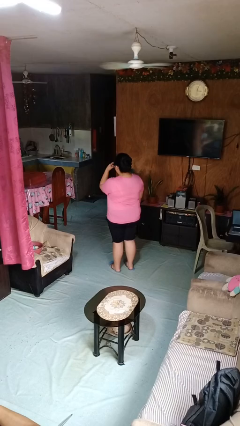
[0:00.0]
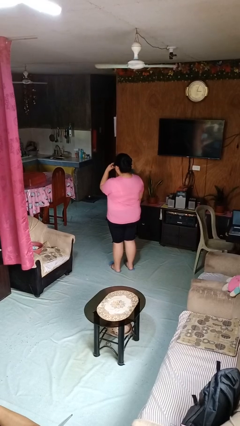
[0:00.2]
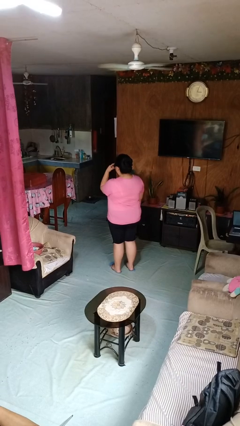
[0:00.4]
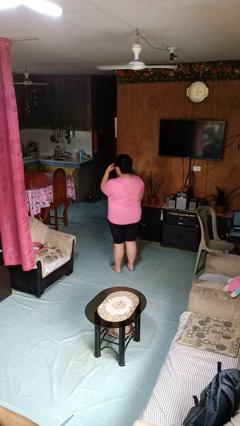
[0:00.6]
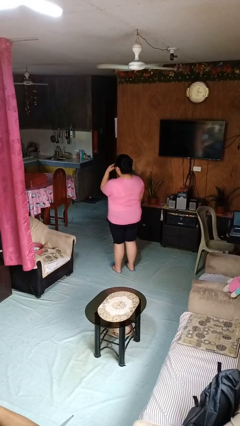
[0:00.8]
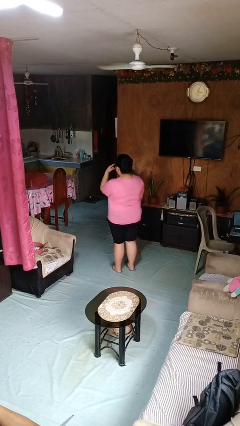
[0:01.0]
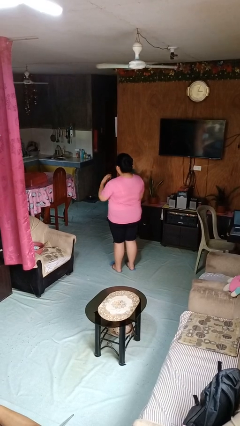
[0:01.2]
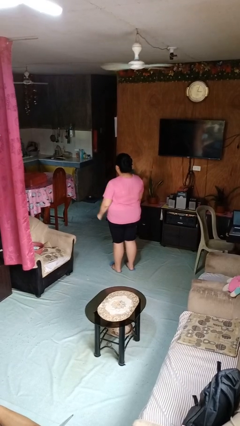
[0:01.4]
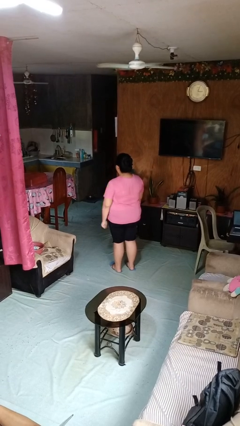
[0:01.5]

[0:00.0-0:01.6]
person gestures watch closely

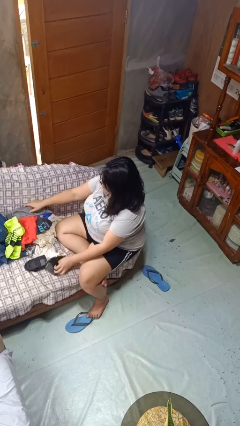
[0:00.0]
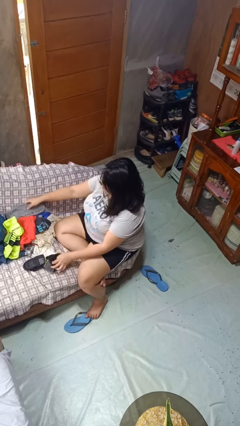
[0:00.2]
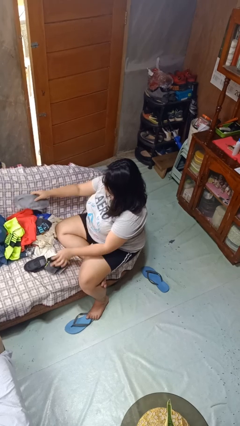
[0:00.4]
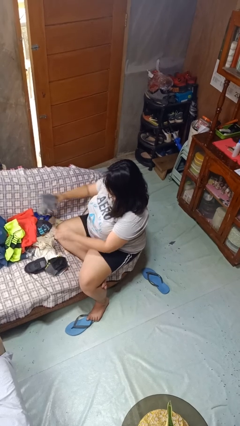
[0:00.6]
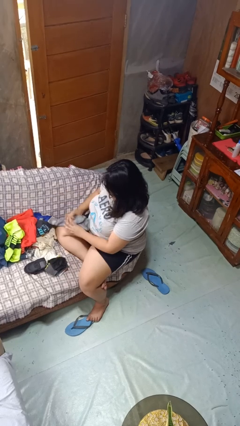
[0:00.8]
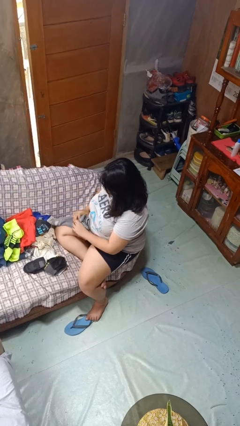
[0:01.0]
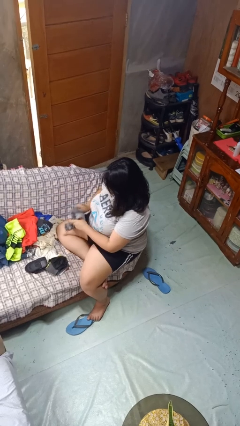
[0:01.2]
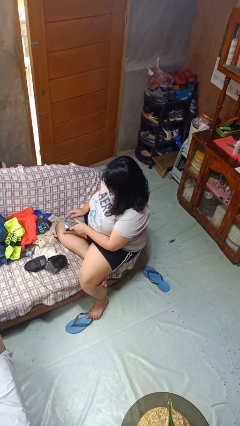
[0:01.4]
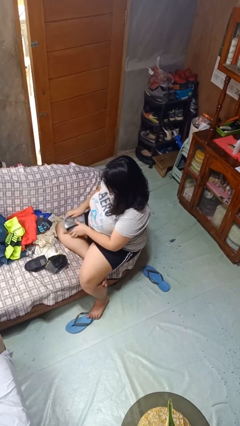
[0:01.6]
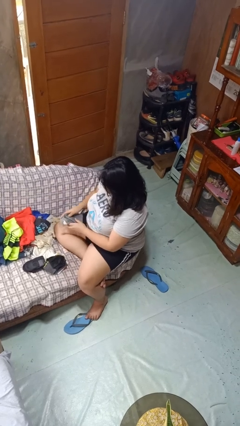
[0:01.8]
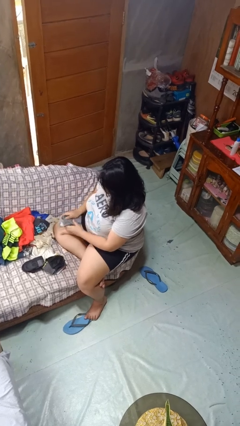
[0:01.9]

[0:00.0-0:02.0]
person folds socks

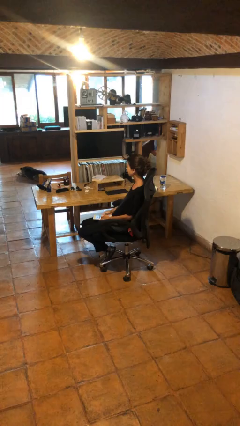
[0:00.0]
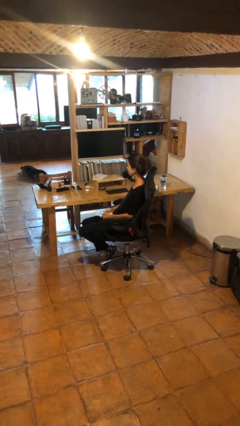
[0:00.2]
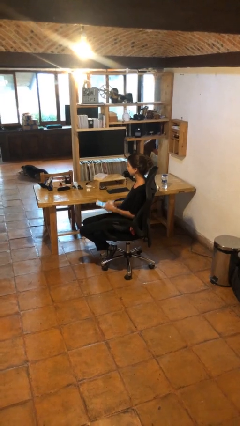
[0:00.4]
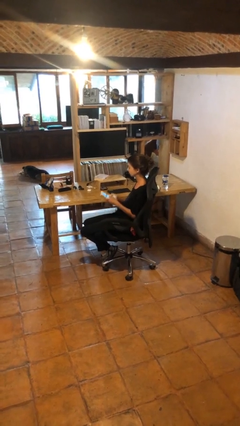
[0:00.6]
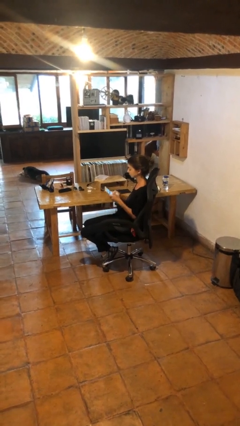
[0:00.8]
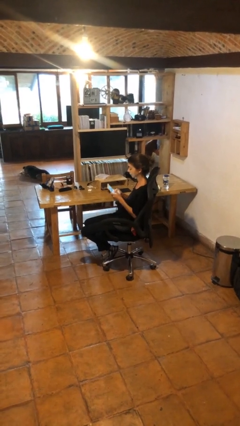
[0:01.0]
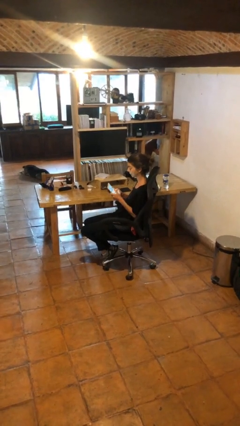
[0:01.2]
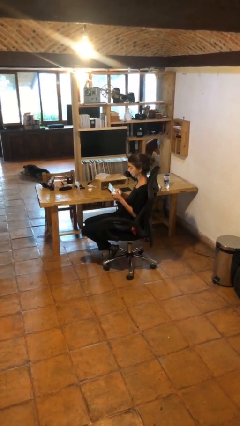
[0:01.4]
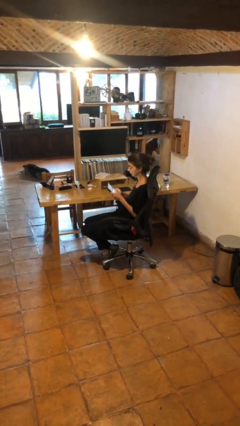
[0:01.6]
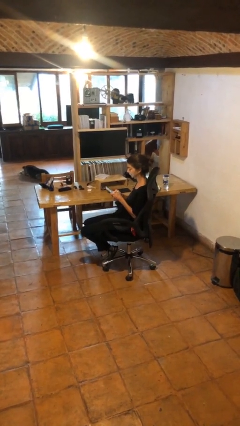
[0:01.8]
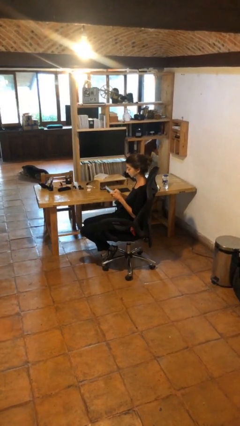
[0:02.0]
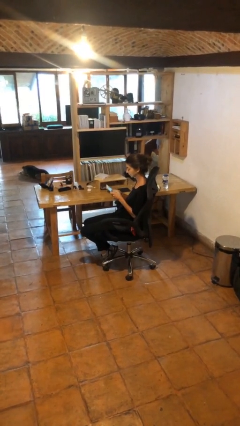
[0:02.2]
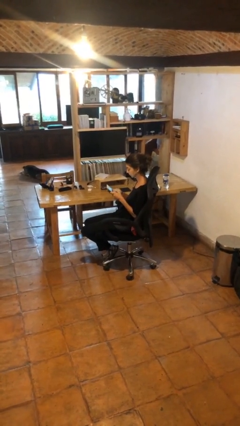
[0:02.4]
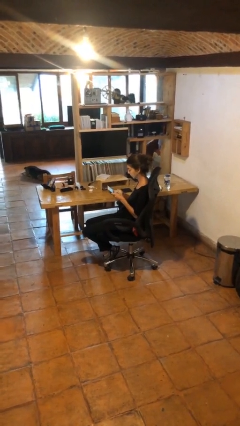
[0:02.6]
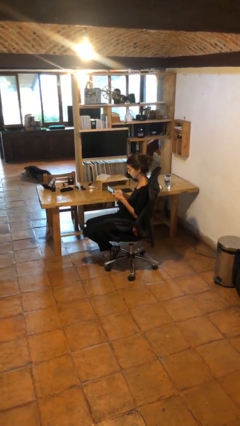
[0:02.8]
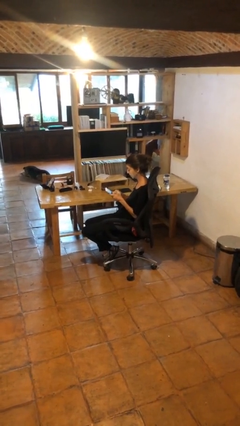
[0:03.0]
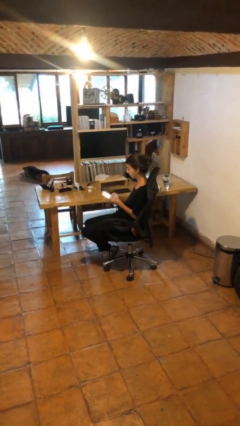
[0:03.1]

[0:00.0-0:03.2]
person interacts with tablet

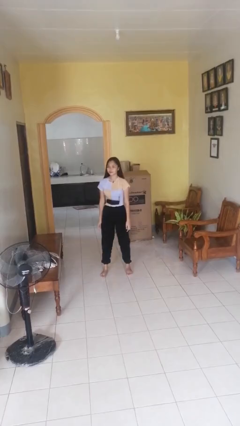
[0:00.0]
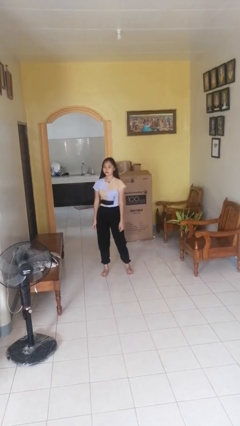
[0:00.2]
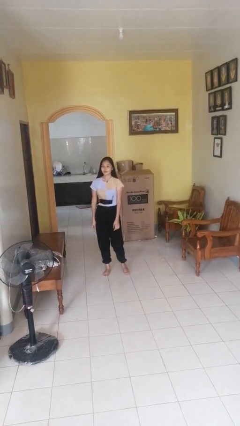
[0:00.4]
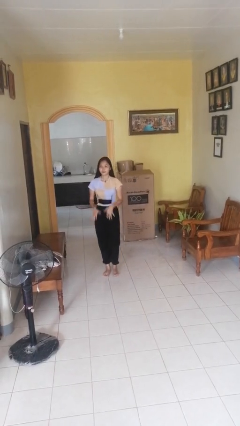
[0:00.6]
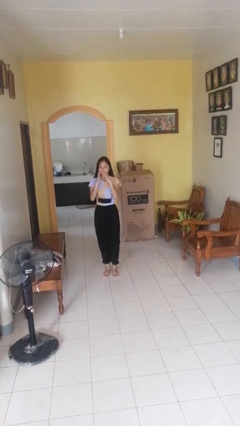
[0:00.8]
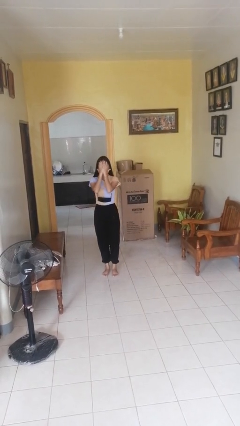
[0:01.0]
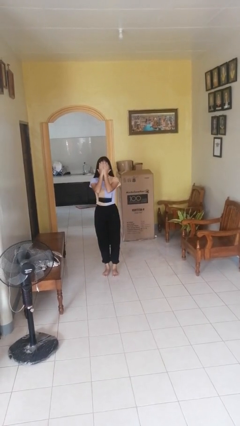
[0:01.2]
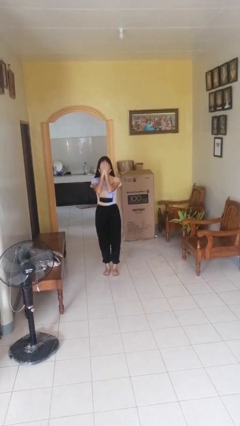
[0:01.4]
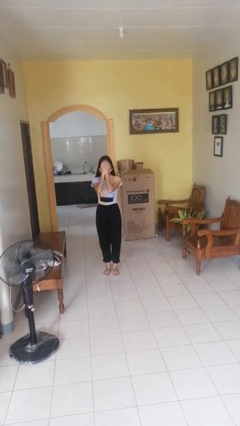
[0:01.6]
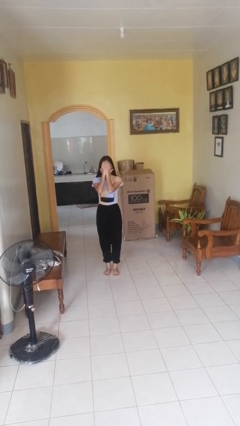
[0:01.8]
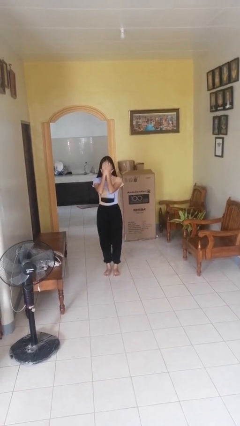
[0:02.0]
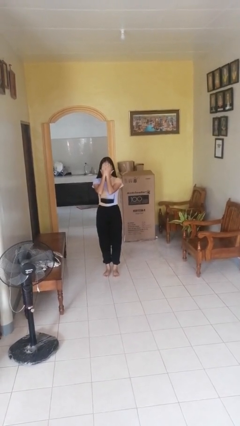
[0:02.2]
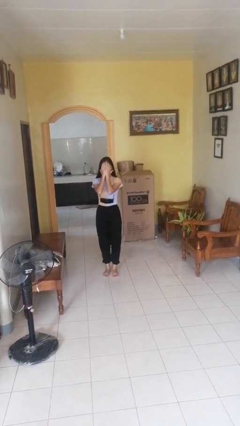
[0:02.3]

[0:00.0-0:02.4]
person covers face with hands

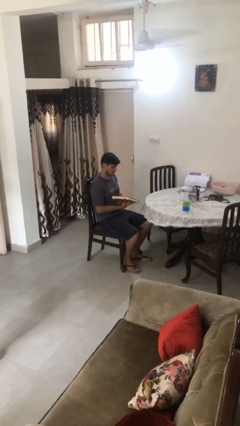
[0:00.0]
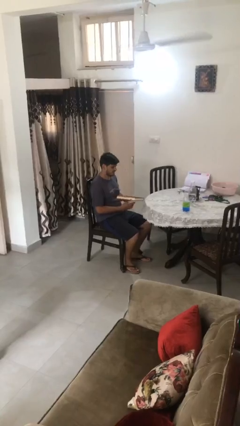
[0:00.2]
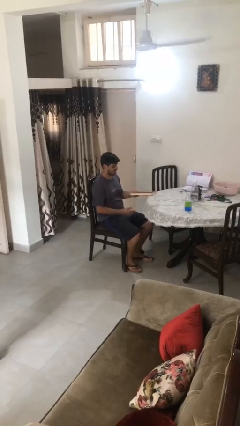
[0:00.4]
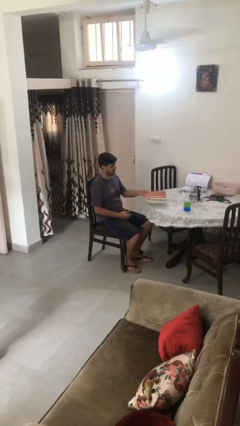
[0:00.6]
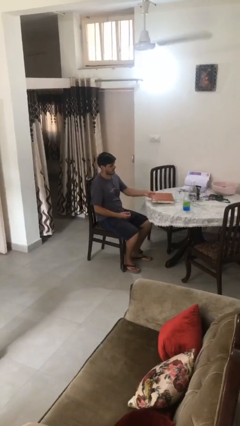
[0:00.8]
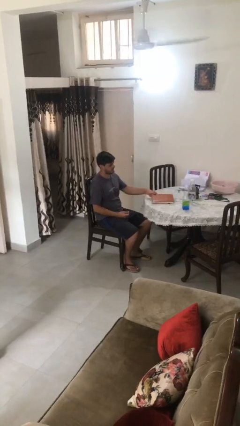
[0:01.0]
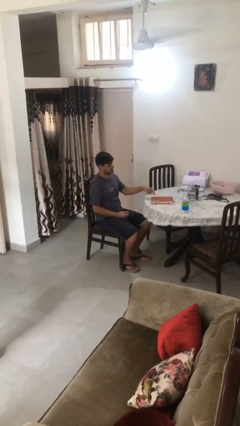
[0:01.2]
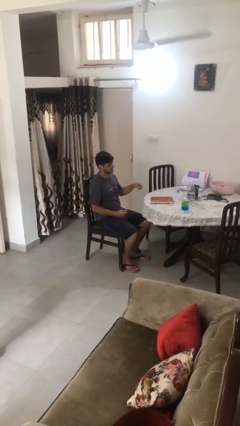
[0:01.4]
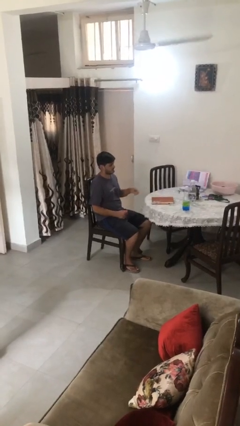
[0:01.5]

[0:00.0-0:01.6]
person puts down object on table

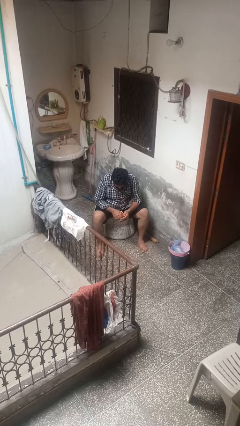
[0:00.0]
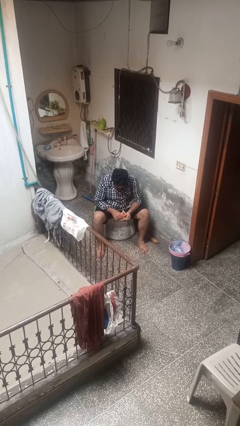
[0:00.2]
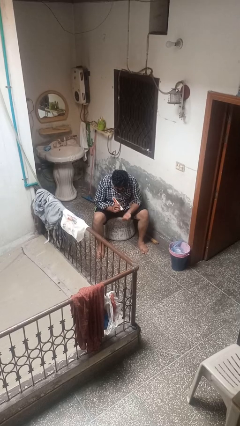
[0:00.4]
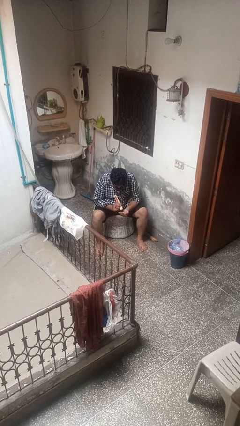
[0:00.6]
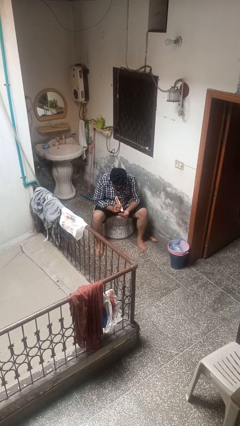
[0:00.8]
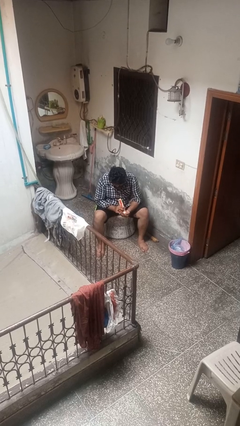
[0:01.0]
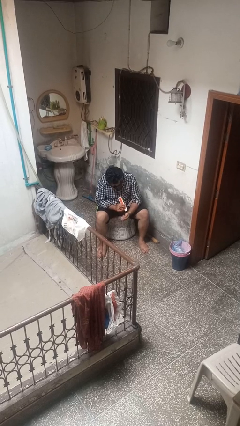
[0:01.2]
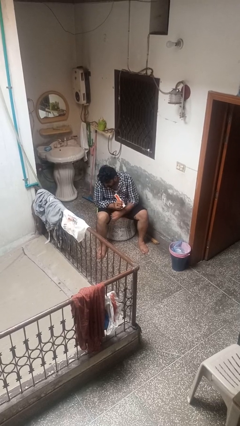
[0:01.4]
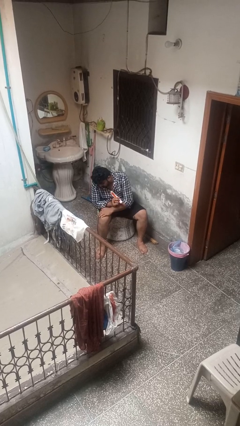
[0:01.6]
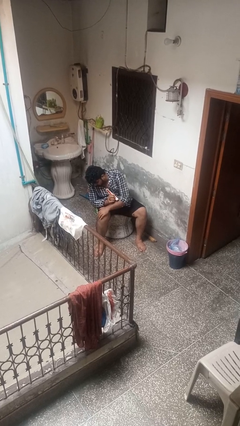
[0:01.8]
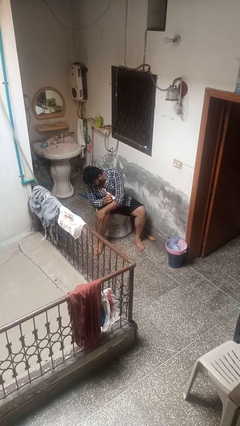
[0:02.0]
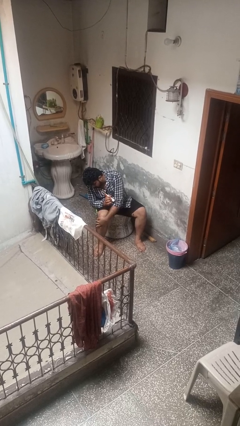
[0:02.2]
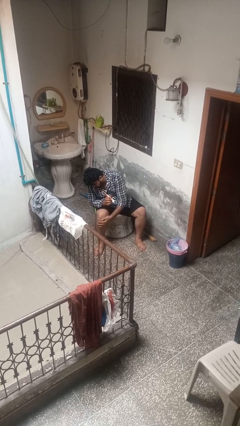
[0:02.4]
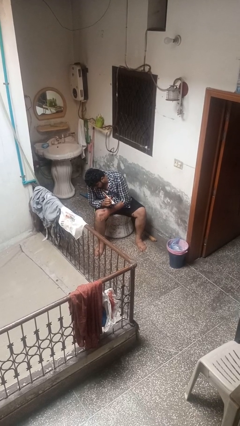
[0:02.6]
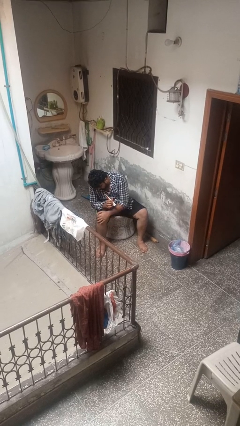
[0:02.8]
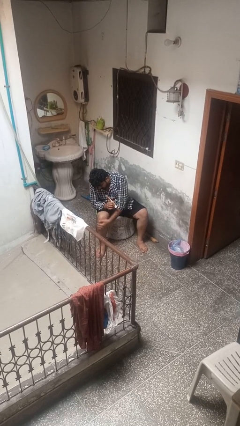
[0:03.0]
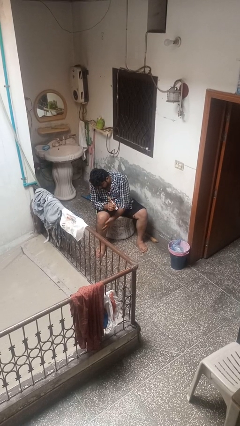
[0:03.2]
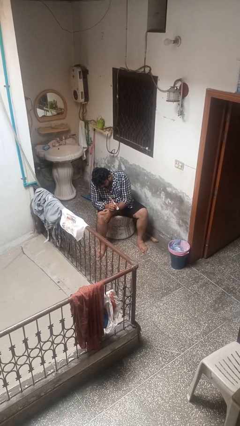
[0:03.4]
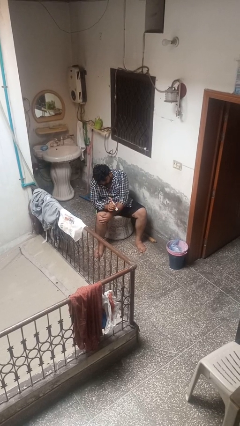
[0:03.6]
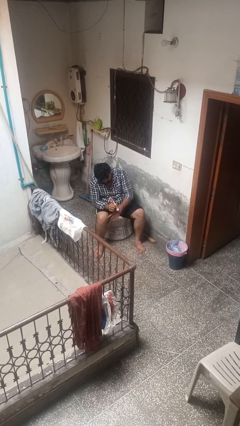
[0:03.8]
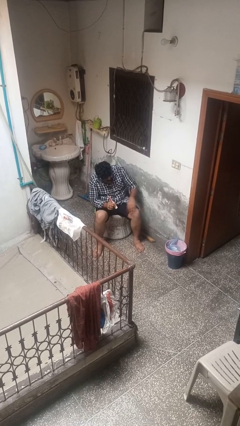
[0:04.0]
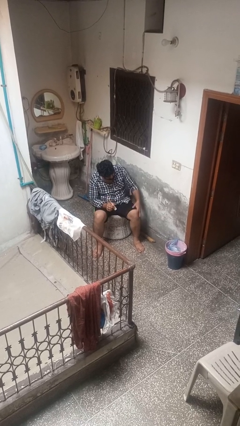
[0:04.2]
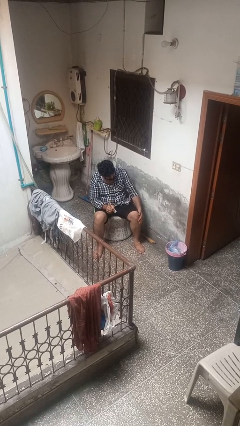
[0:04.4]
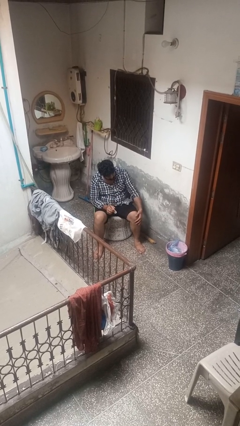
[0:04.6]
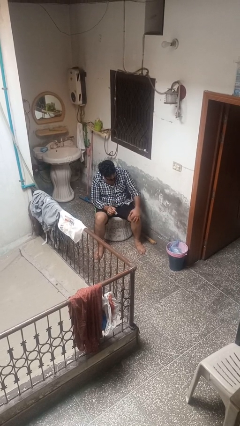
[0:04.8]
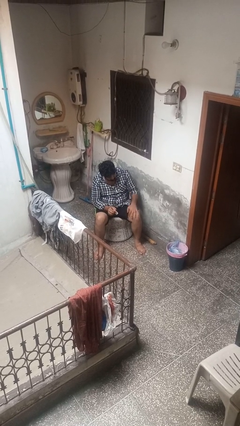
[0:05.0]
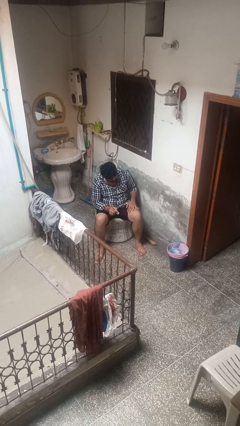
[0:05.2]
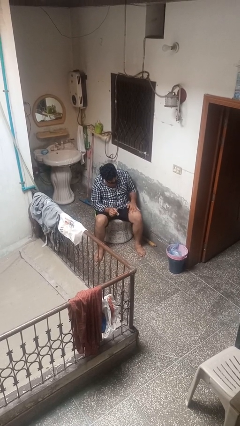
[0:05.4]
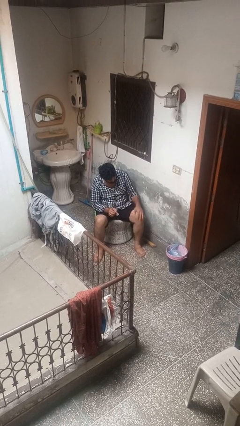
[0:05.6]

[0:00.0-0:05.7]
person applies sunscreen

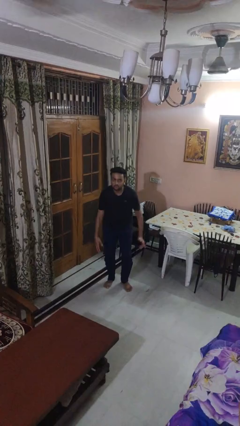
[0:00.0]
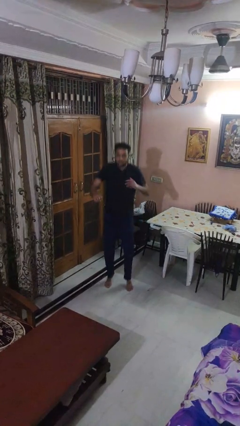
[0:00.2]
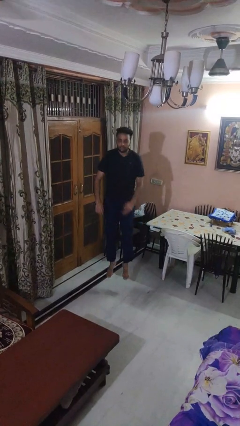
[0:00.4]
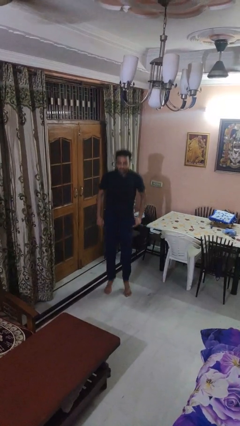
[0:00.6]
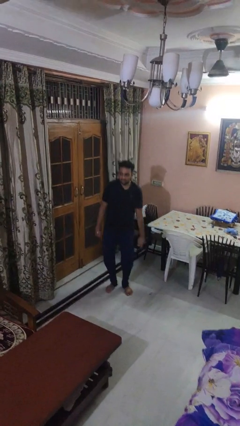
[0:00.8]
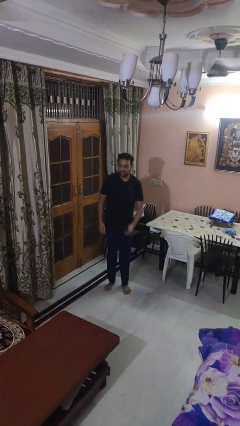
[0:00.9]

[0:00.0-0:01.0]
person jumps
